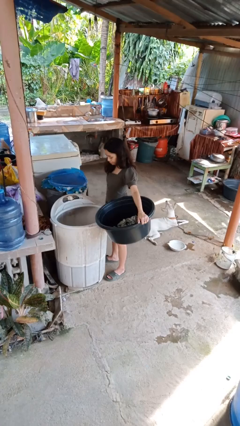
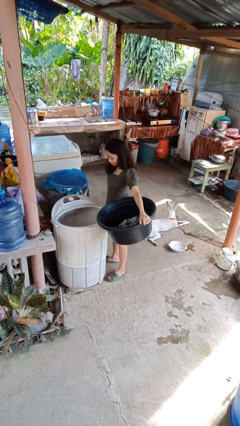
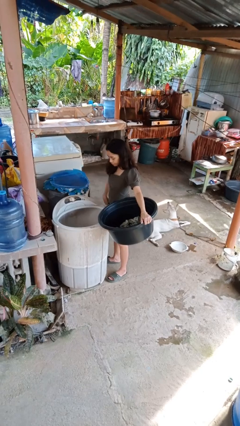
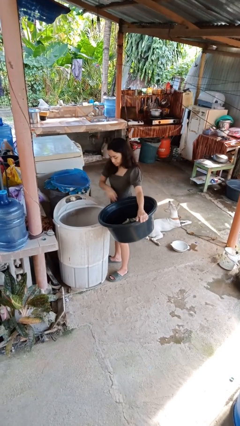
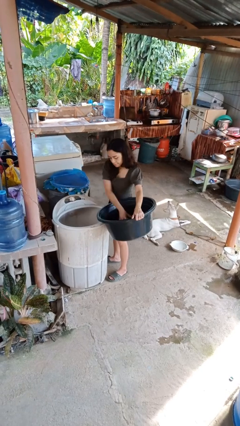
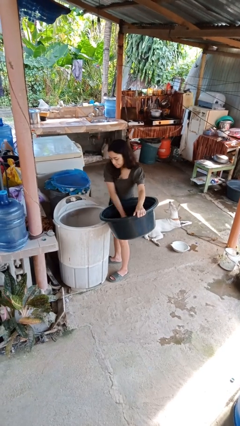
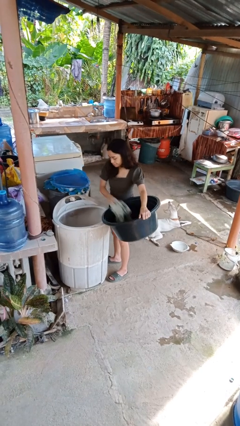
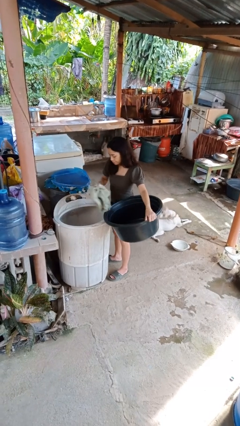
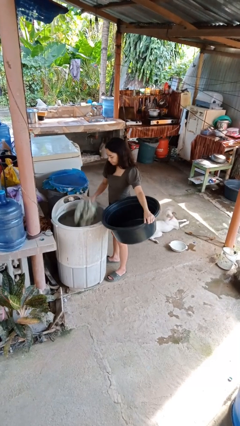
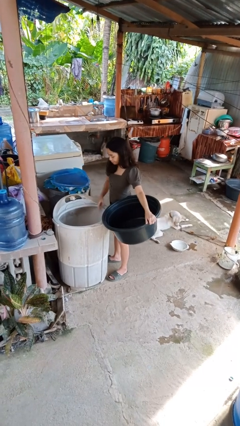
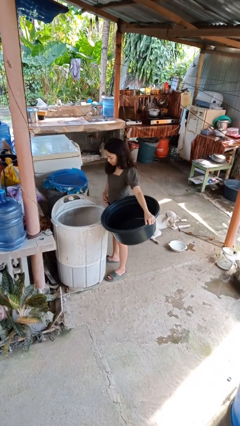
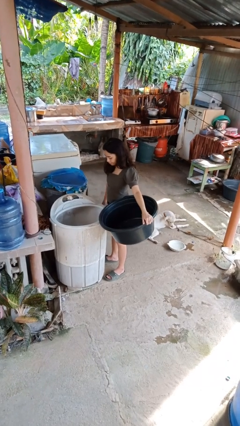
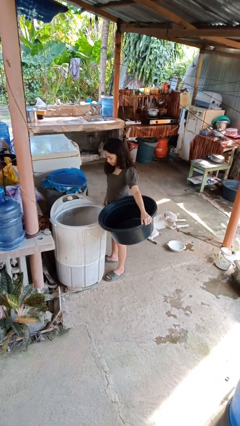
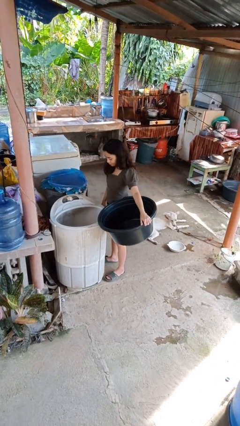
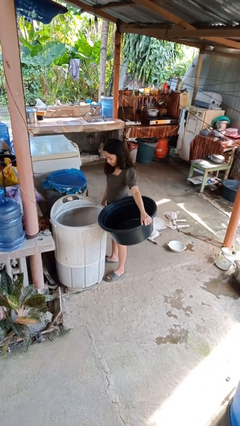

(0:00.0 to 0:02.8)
person loads clotheswasher

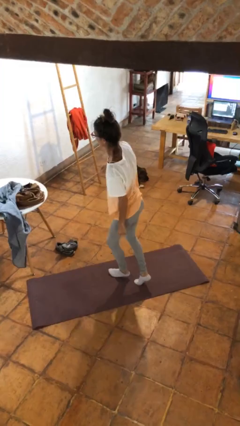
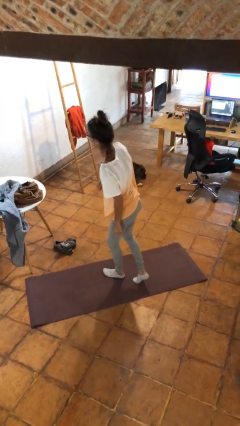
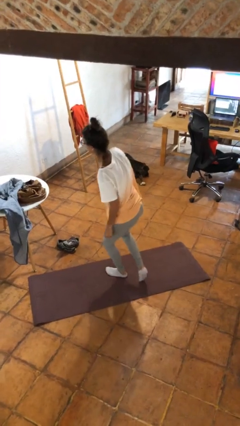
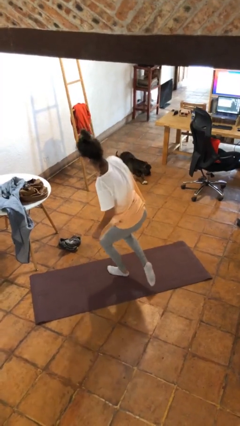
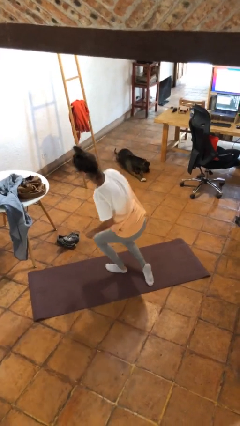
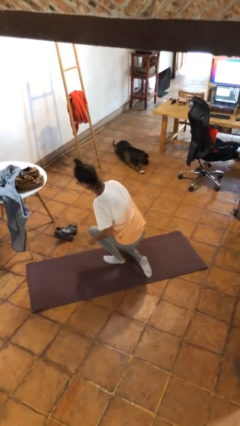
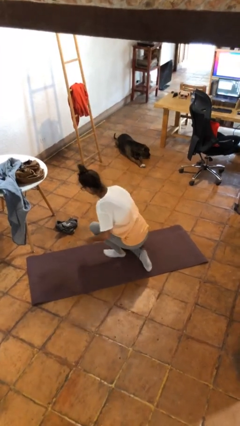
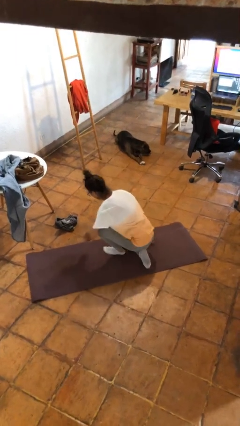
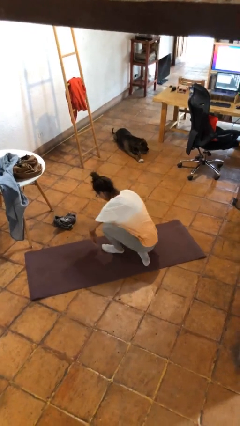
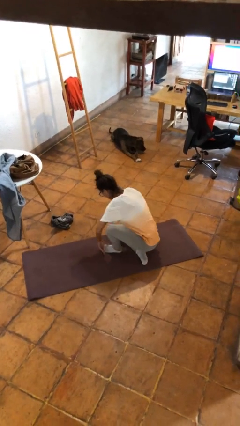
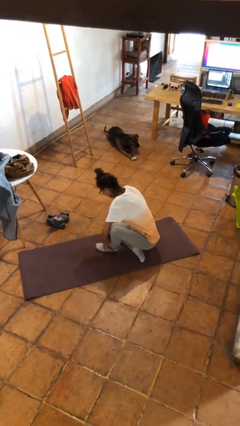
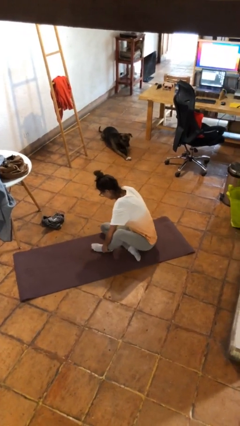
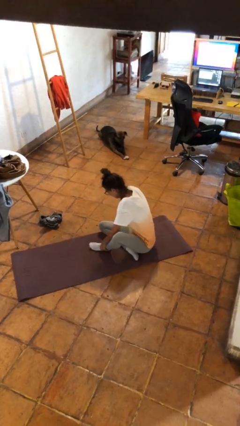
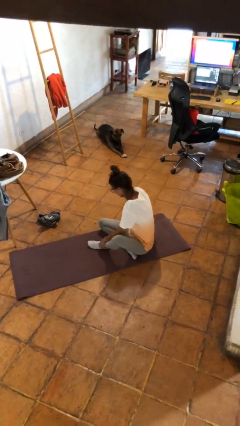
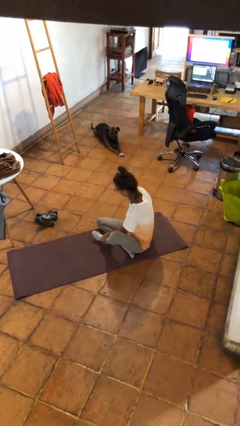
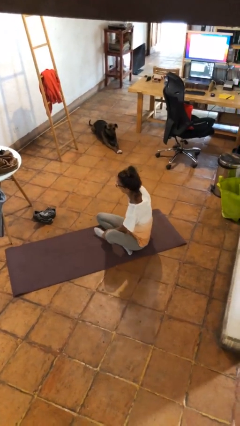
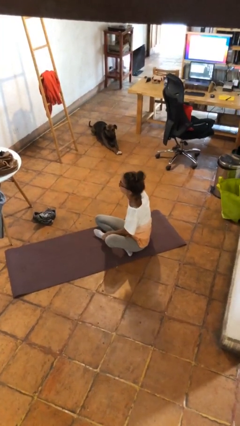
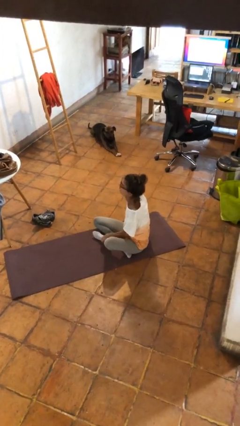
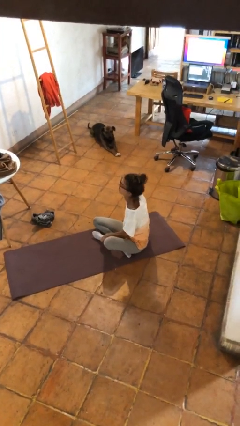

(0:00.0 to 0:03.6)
person stands up from floor

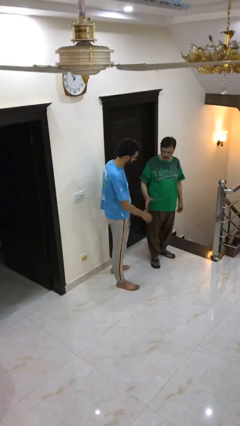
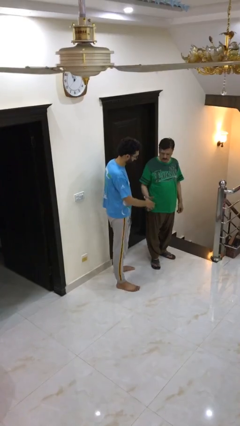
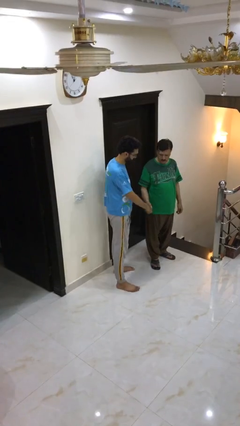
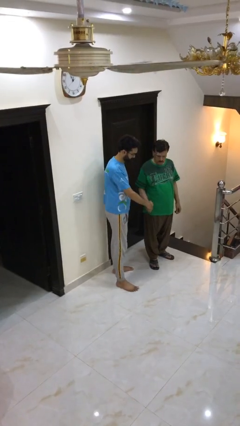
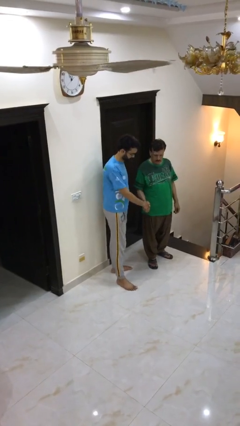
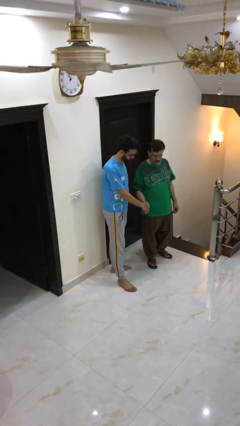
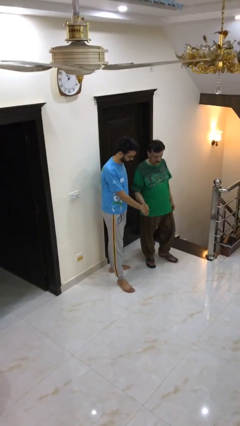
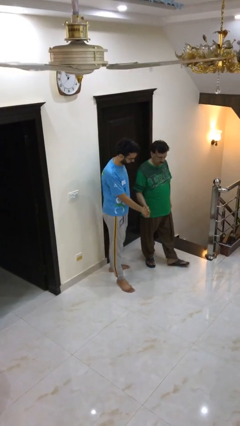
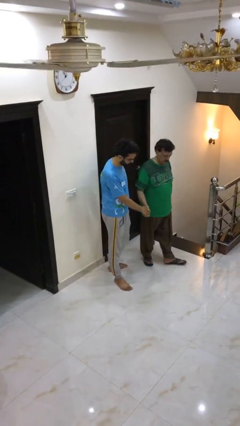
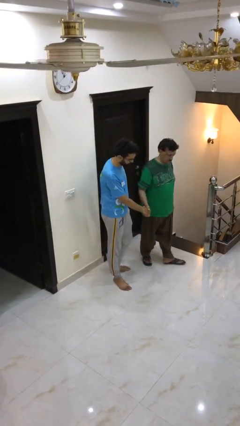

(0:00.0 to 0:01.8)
person shakes hand

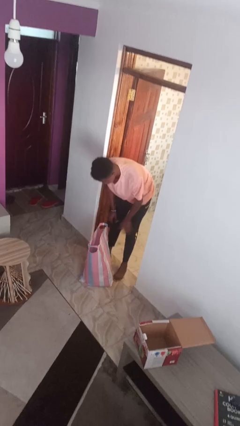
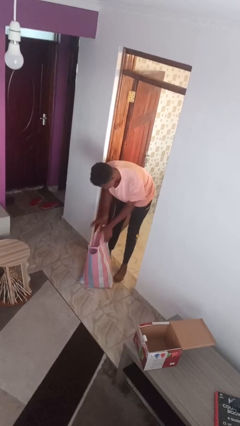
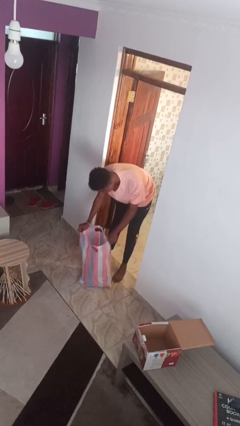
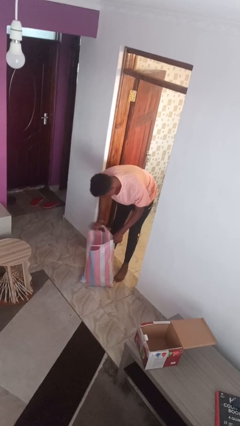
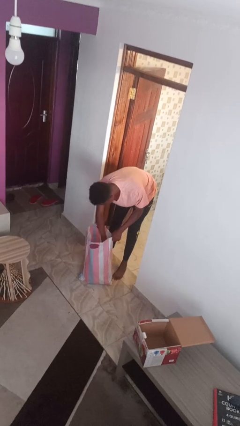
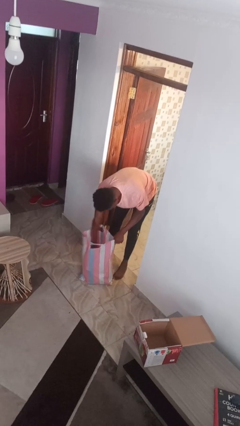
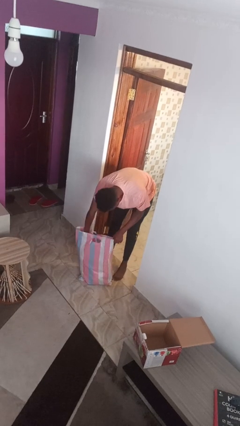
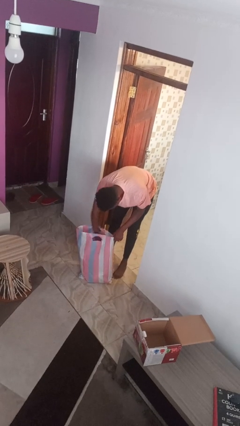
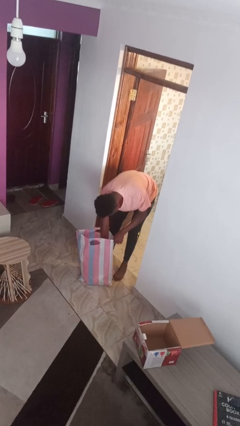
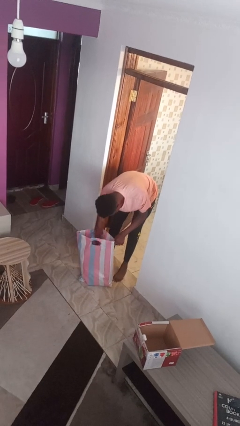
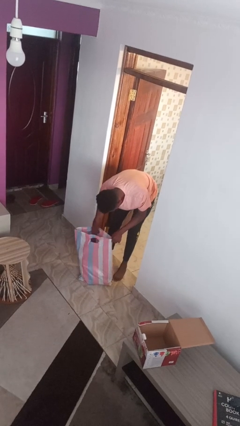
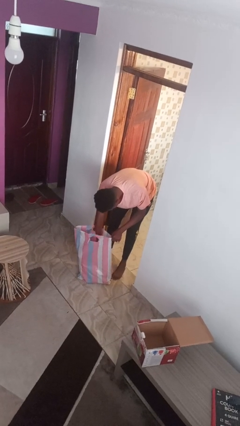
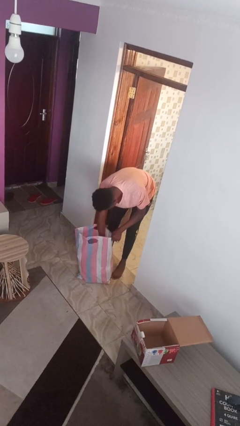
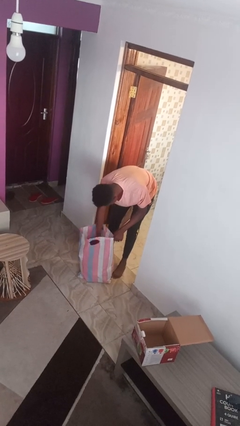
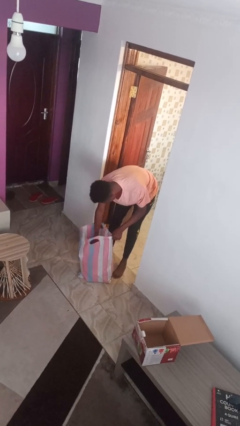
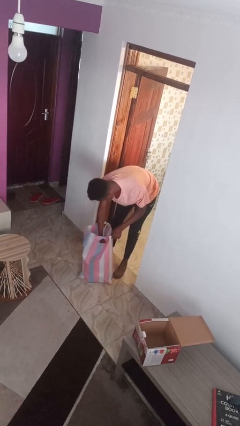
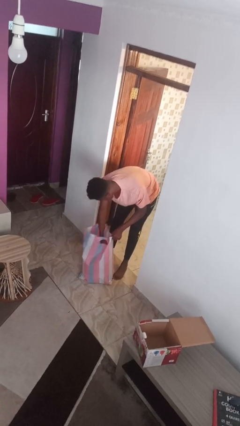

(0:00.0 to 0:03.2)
person searches in bag

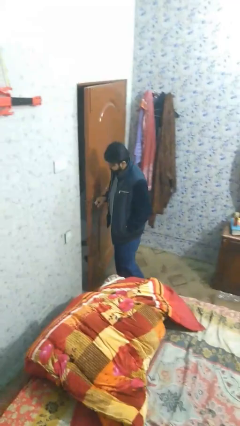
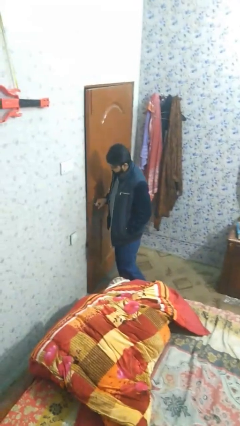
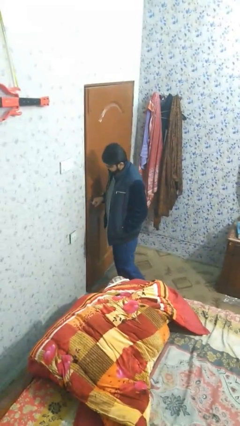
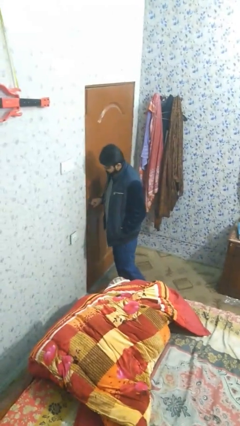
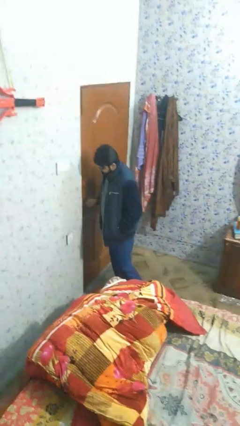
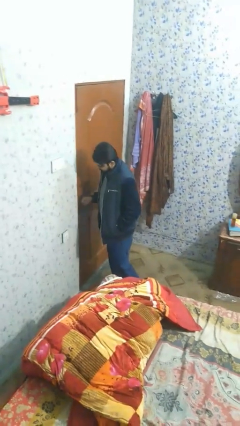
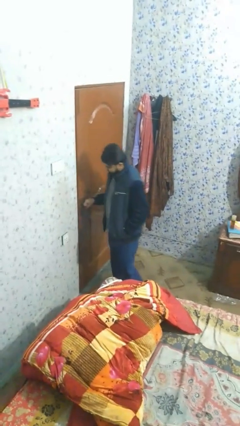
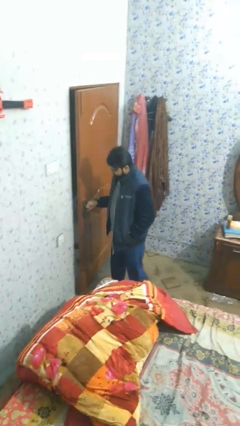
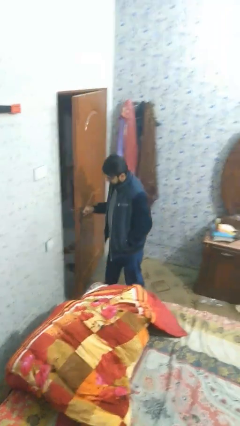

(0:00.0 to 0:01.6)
person closes facility door

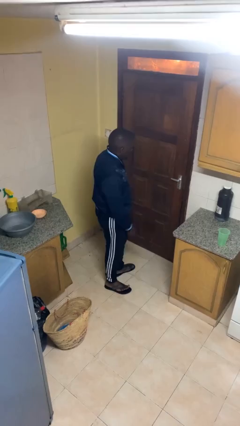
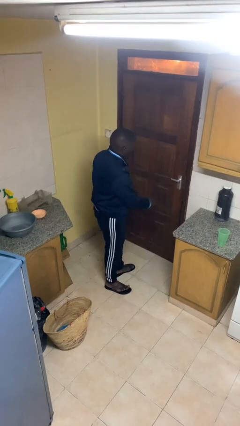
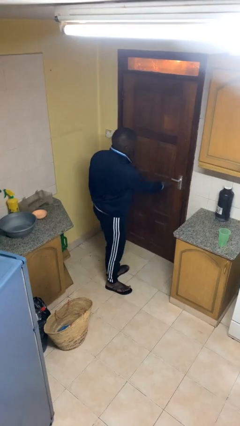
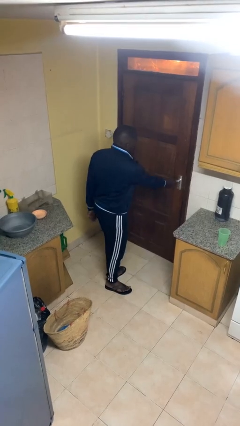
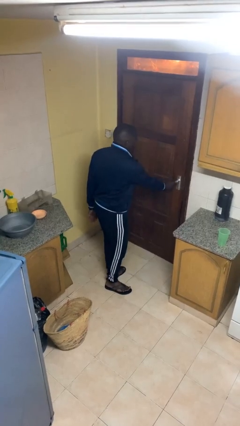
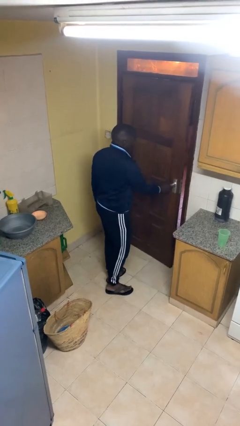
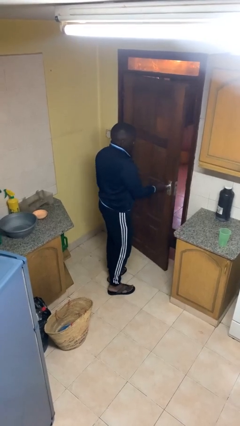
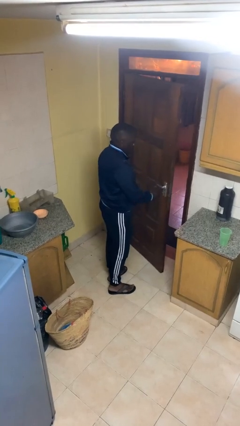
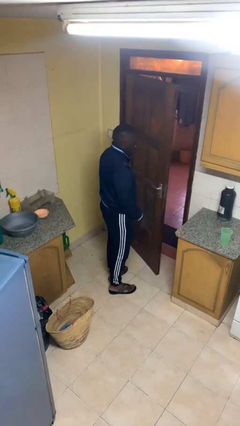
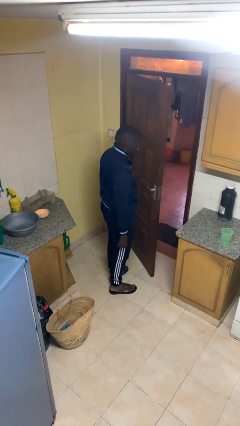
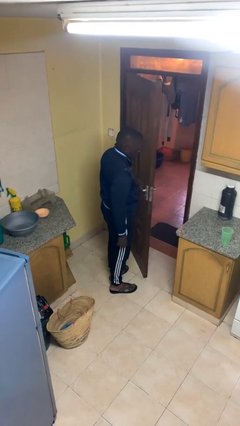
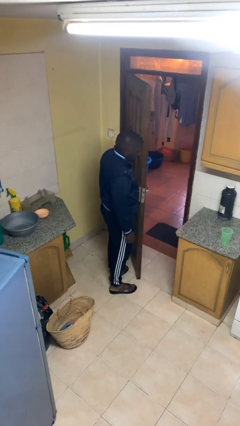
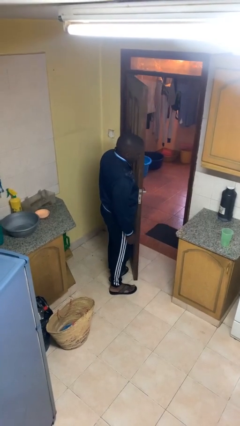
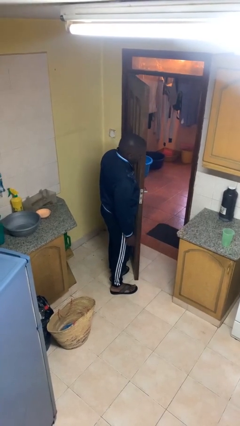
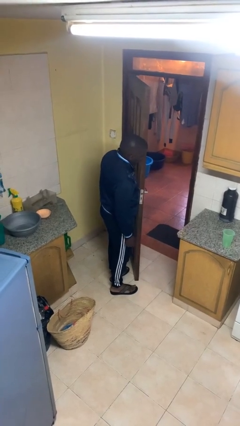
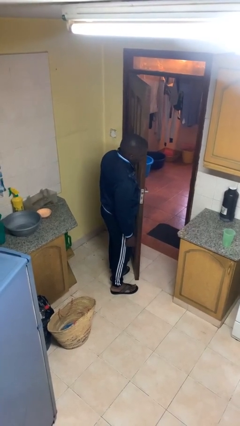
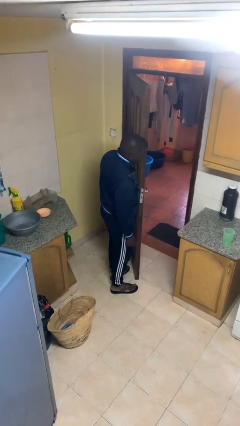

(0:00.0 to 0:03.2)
person opens facility door

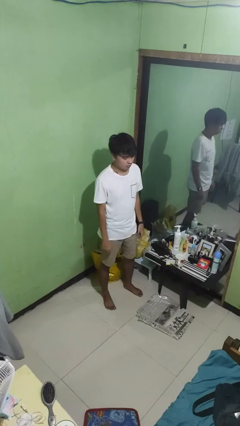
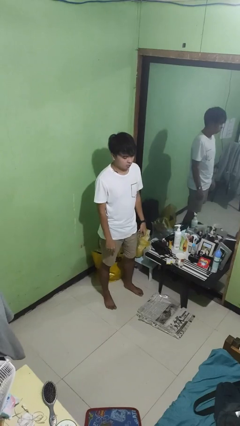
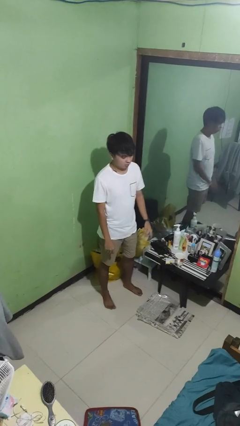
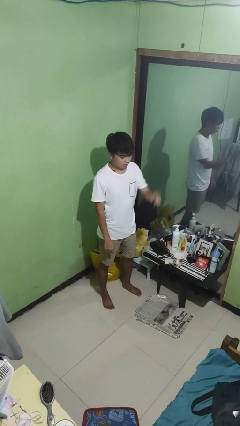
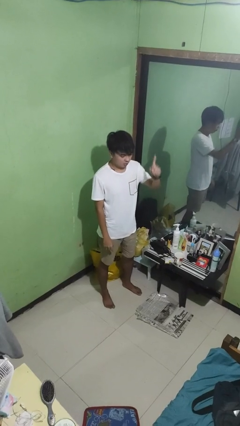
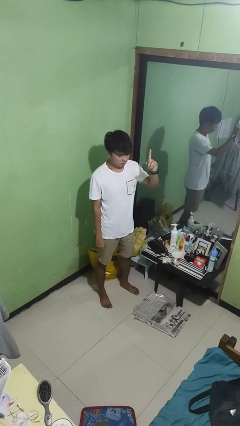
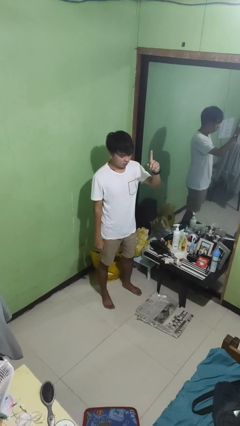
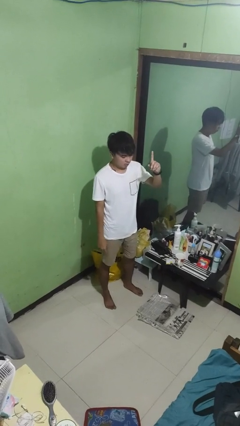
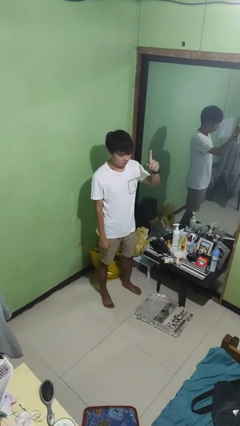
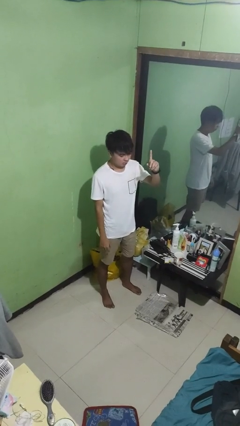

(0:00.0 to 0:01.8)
person gestures number one
